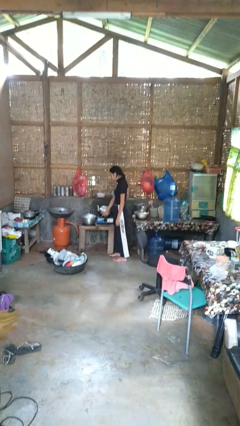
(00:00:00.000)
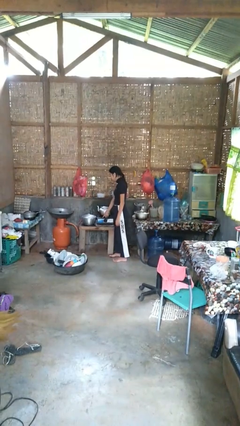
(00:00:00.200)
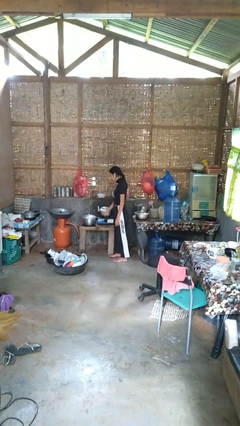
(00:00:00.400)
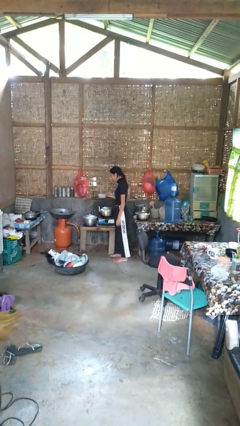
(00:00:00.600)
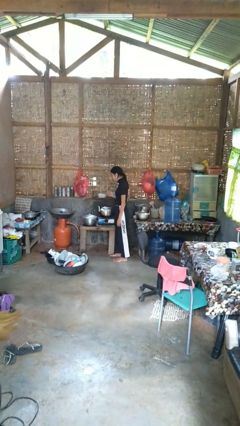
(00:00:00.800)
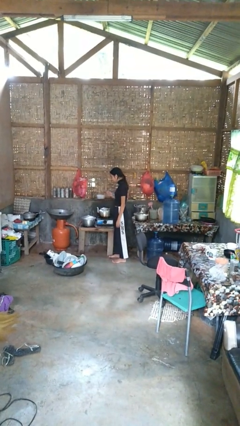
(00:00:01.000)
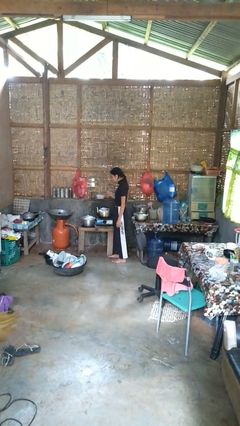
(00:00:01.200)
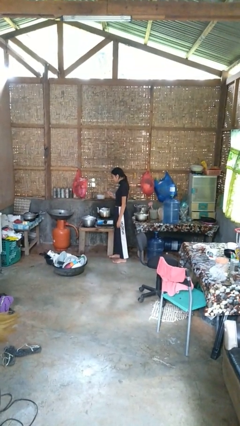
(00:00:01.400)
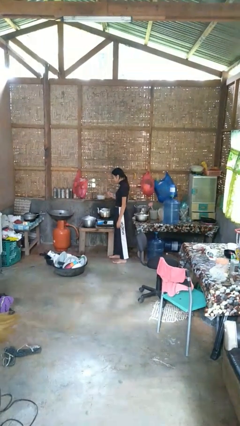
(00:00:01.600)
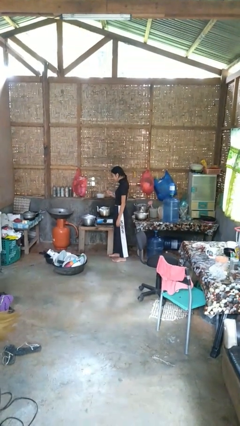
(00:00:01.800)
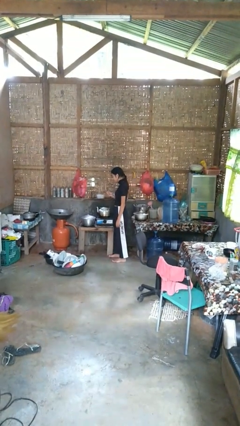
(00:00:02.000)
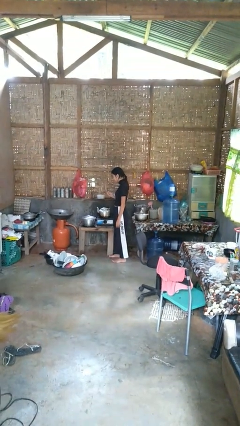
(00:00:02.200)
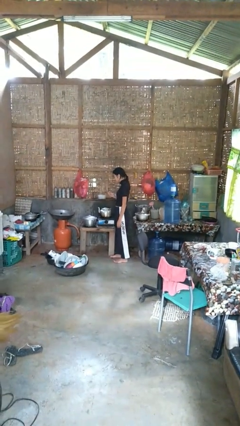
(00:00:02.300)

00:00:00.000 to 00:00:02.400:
person burns hand

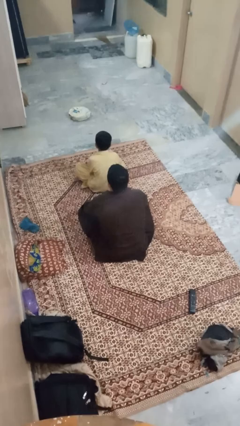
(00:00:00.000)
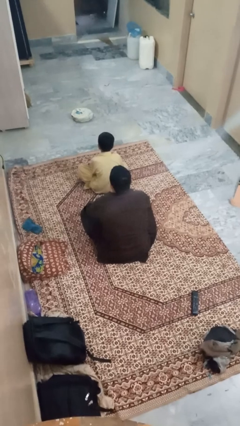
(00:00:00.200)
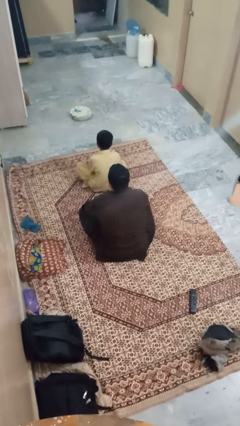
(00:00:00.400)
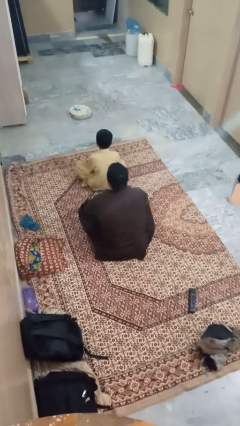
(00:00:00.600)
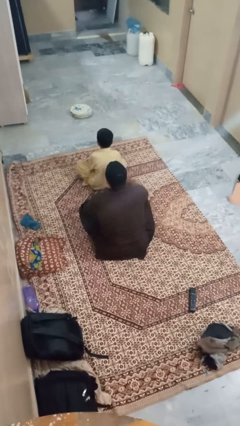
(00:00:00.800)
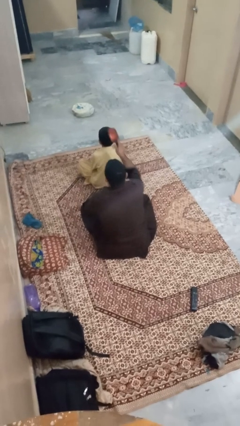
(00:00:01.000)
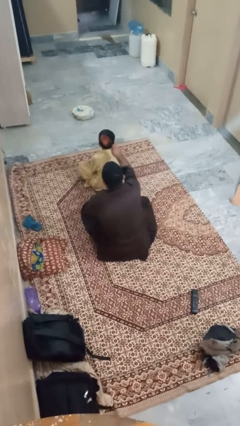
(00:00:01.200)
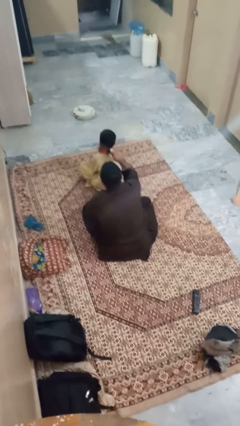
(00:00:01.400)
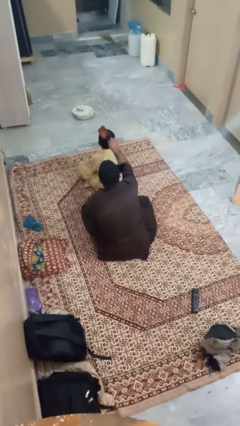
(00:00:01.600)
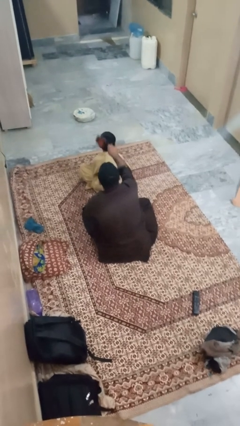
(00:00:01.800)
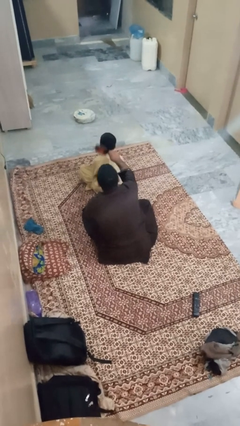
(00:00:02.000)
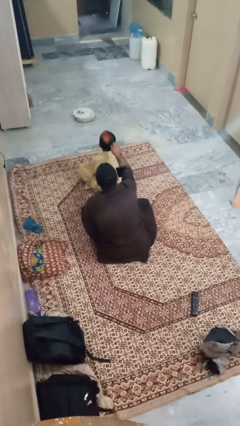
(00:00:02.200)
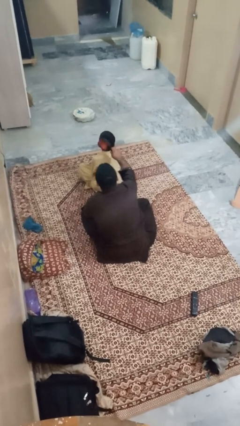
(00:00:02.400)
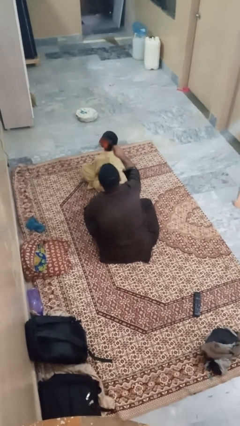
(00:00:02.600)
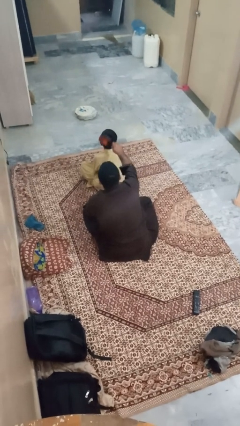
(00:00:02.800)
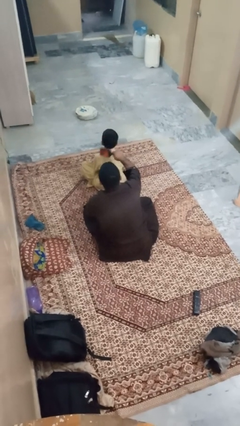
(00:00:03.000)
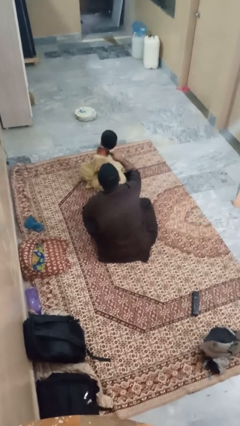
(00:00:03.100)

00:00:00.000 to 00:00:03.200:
person brushes hair of person

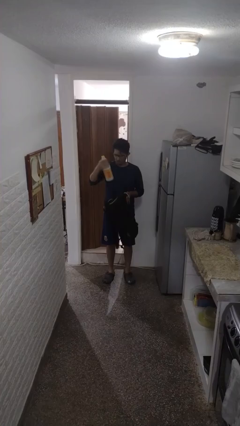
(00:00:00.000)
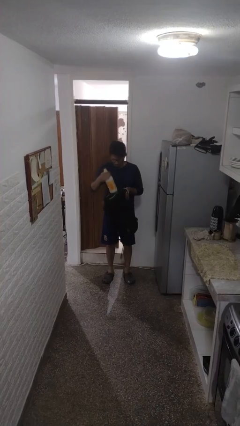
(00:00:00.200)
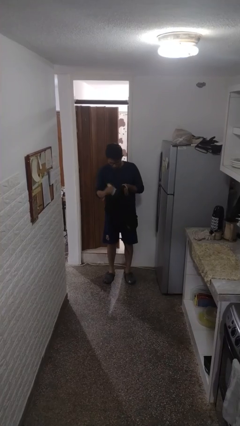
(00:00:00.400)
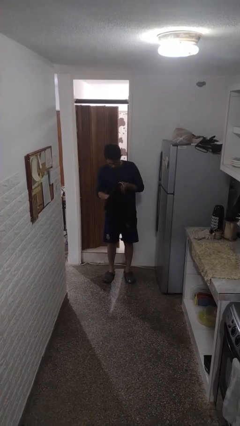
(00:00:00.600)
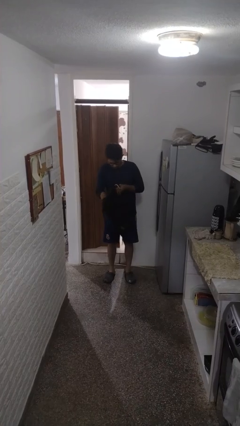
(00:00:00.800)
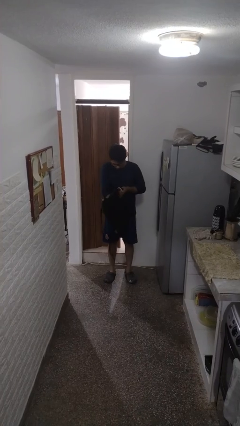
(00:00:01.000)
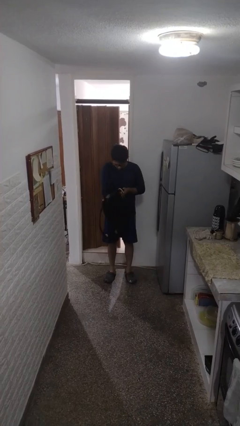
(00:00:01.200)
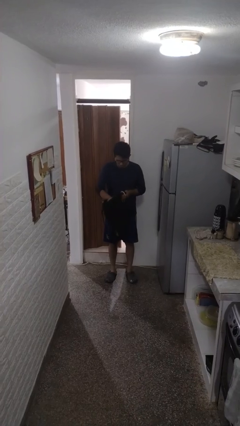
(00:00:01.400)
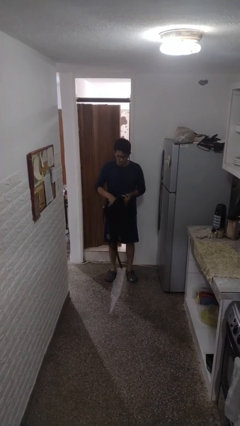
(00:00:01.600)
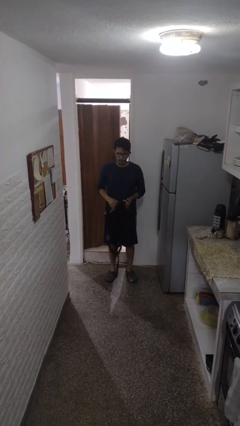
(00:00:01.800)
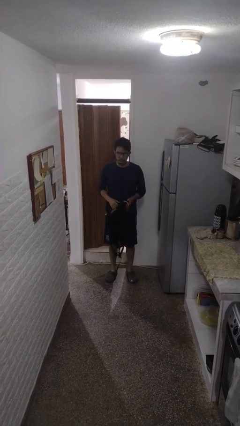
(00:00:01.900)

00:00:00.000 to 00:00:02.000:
person puts object into backpack

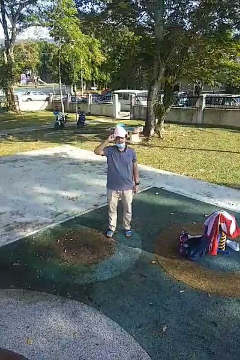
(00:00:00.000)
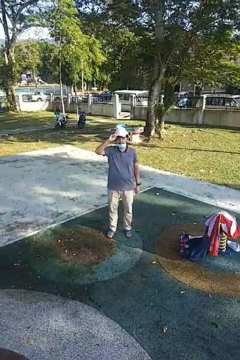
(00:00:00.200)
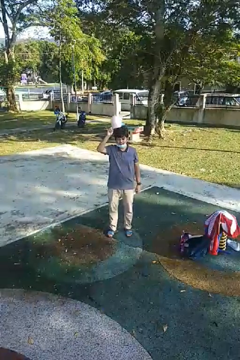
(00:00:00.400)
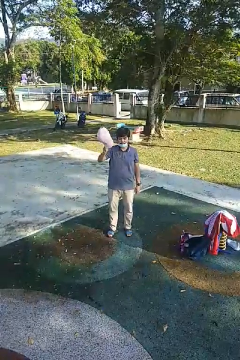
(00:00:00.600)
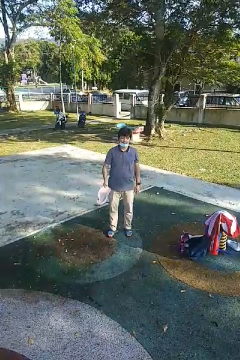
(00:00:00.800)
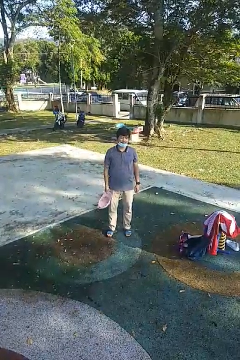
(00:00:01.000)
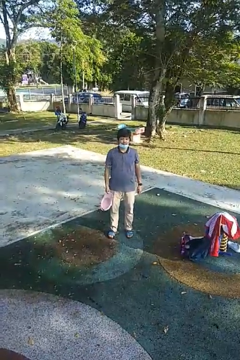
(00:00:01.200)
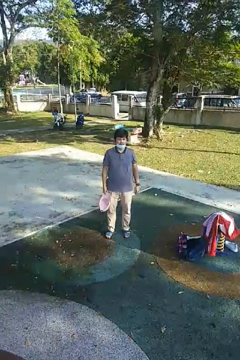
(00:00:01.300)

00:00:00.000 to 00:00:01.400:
person takes off hat

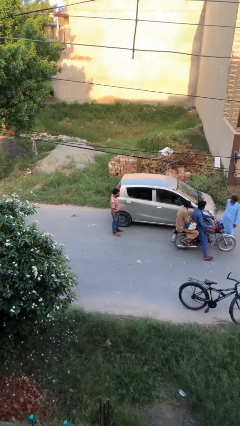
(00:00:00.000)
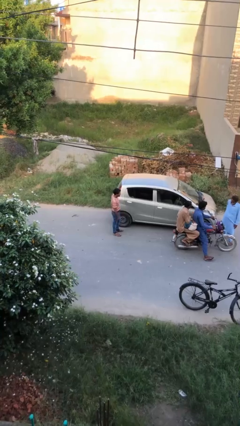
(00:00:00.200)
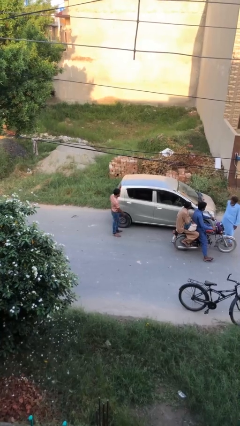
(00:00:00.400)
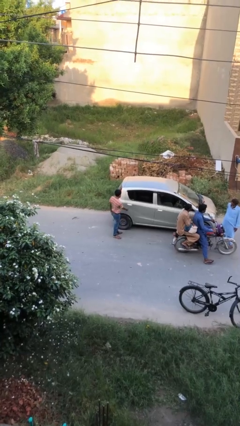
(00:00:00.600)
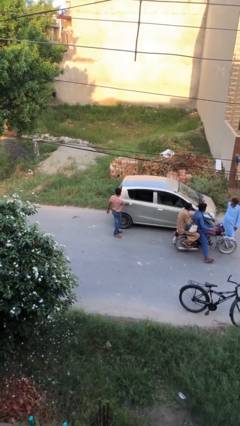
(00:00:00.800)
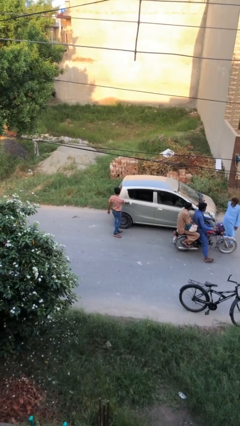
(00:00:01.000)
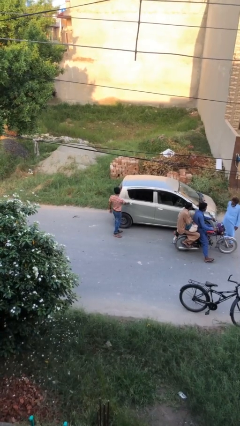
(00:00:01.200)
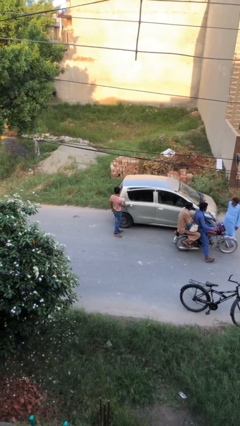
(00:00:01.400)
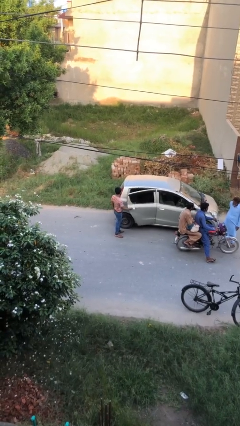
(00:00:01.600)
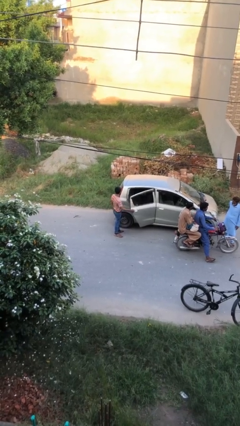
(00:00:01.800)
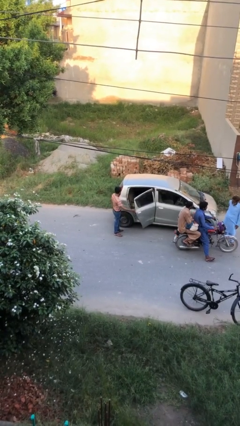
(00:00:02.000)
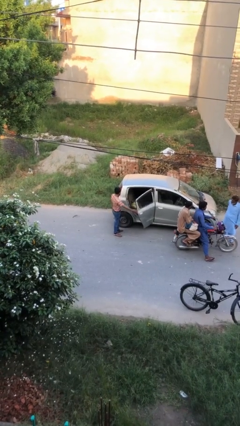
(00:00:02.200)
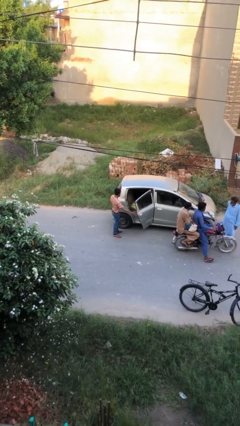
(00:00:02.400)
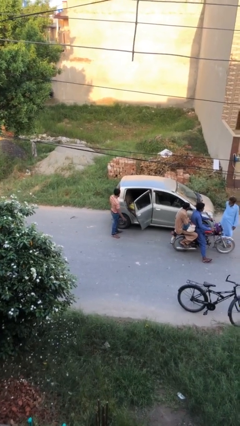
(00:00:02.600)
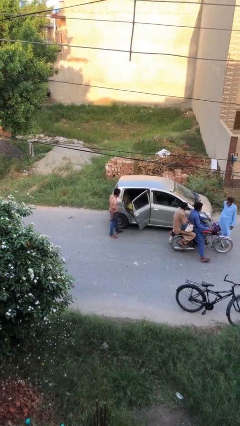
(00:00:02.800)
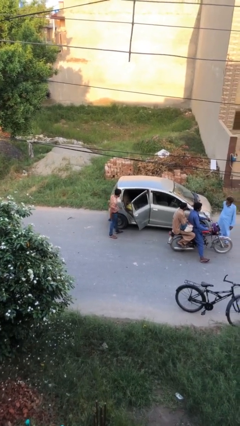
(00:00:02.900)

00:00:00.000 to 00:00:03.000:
person opens car door

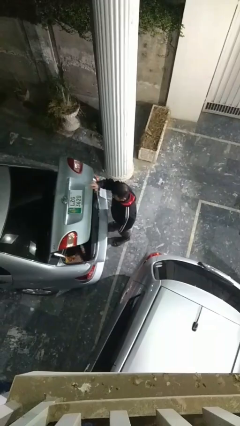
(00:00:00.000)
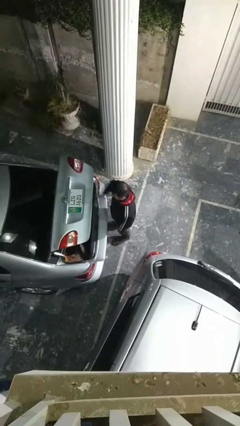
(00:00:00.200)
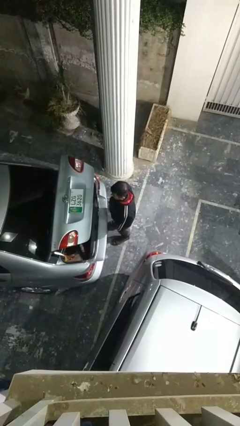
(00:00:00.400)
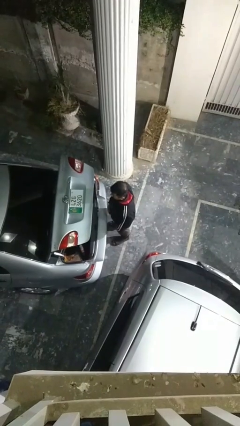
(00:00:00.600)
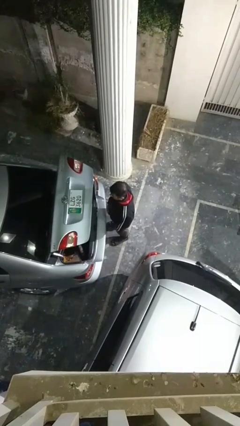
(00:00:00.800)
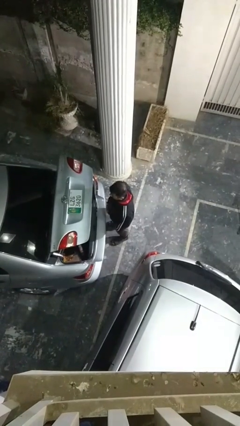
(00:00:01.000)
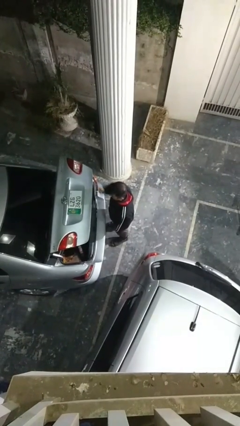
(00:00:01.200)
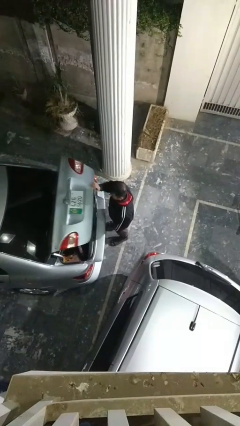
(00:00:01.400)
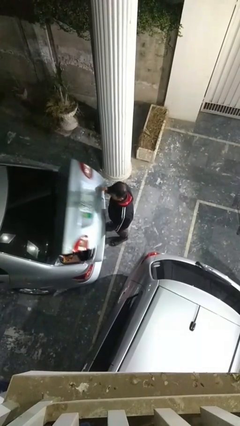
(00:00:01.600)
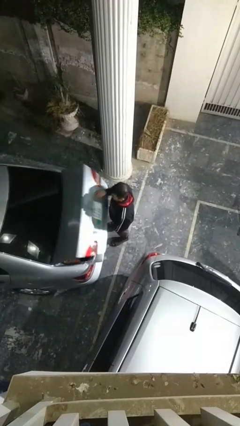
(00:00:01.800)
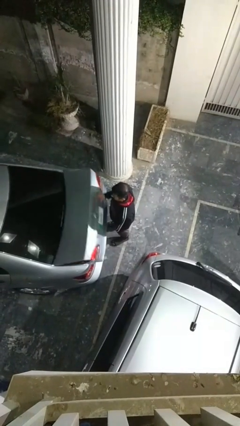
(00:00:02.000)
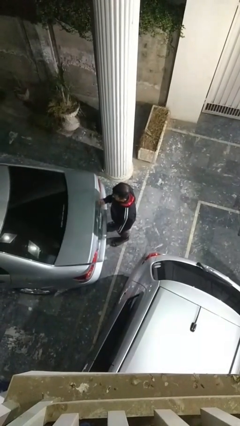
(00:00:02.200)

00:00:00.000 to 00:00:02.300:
person closes car trunk

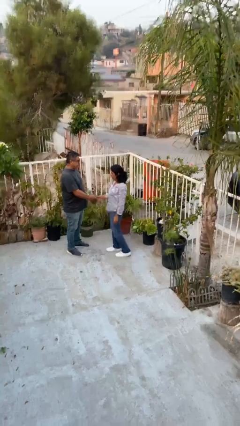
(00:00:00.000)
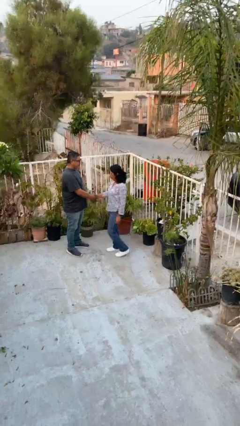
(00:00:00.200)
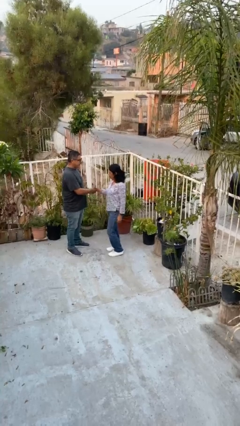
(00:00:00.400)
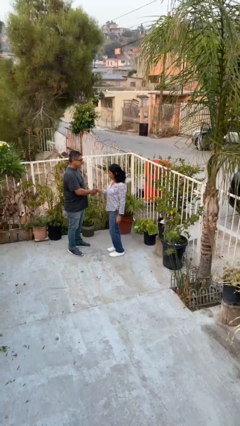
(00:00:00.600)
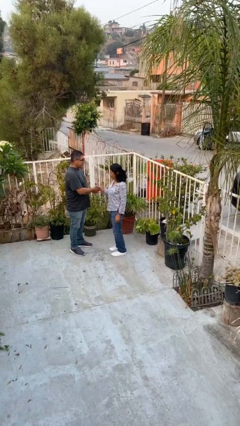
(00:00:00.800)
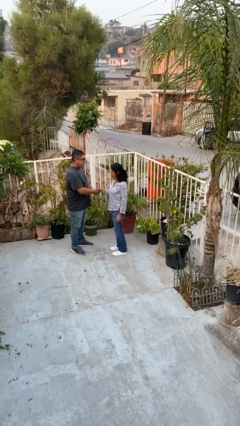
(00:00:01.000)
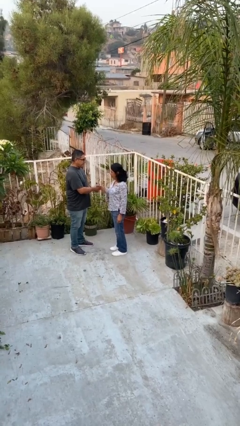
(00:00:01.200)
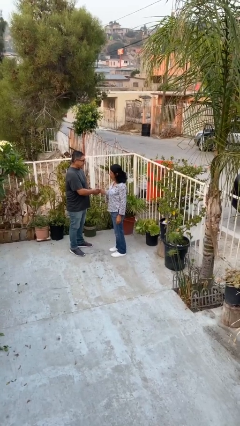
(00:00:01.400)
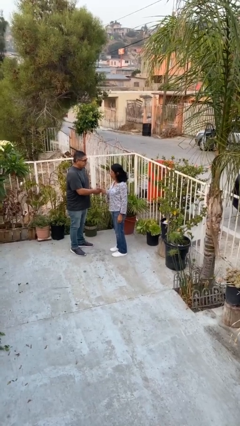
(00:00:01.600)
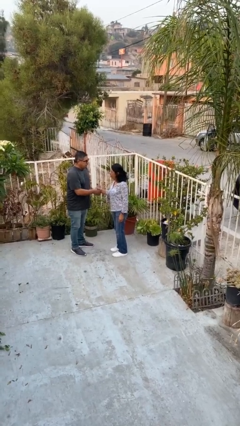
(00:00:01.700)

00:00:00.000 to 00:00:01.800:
person shakes hand

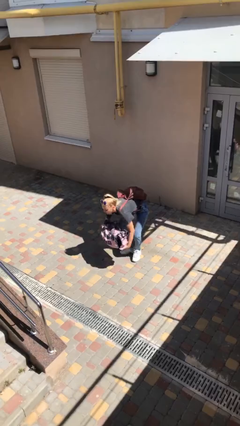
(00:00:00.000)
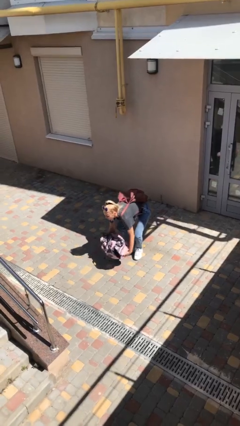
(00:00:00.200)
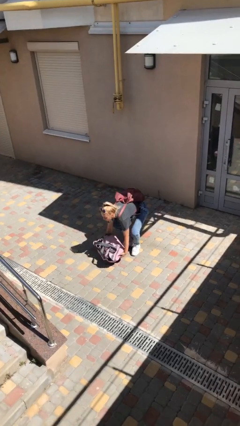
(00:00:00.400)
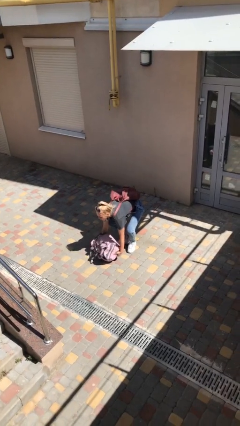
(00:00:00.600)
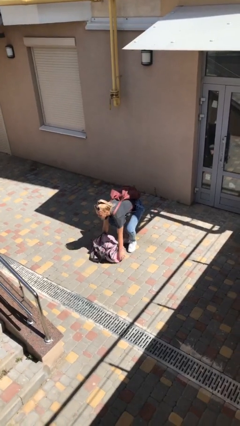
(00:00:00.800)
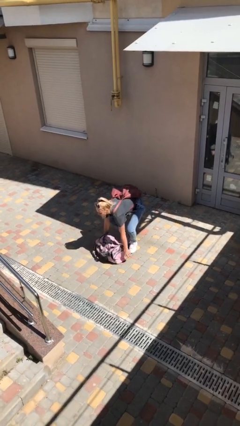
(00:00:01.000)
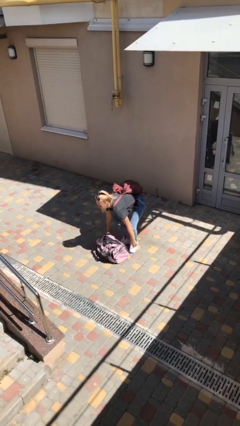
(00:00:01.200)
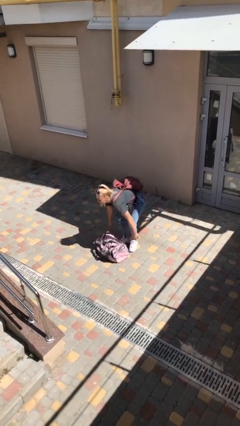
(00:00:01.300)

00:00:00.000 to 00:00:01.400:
person puts down object on floor
